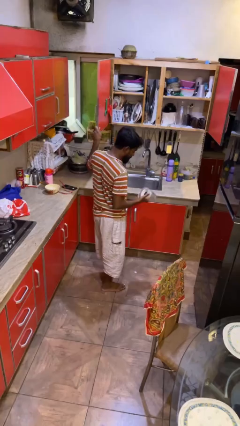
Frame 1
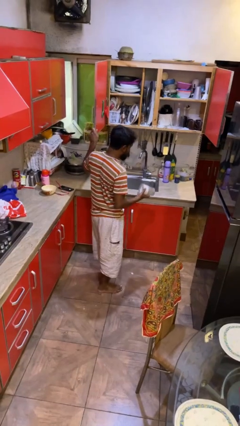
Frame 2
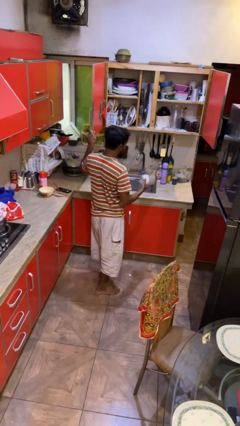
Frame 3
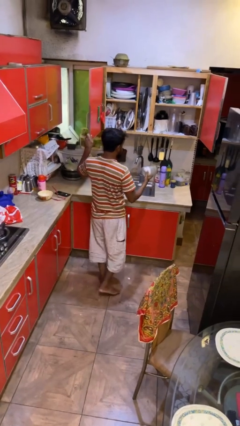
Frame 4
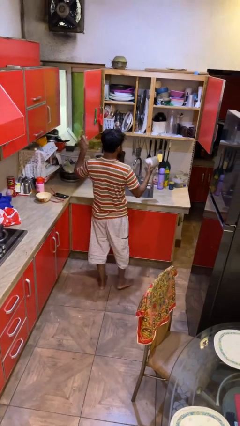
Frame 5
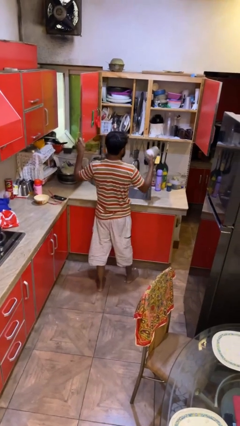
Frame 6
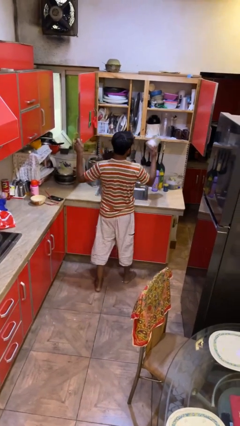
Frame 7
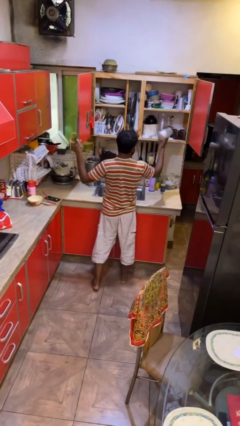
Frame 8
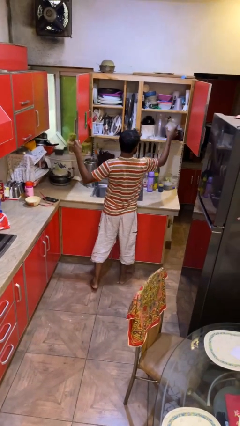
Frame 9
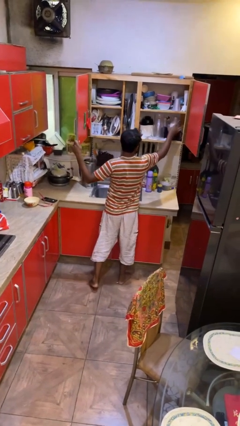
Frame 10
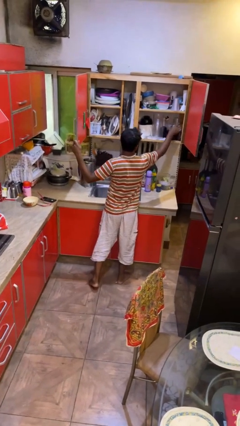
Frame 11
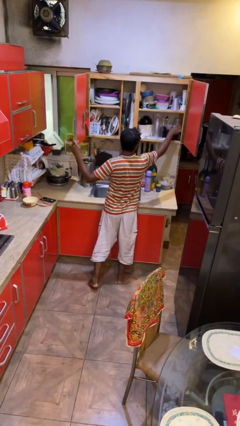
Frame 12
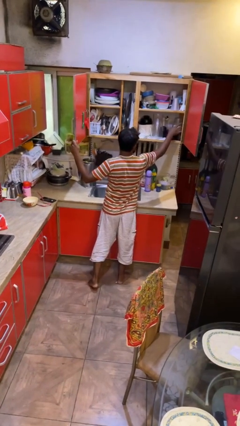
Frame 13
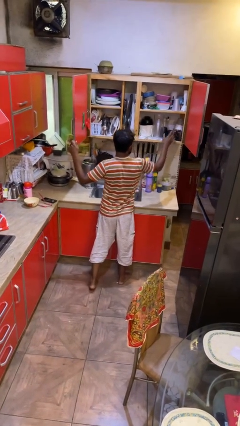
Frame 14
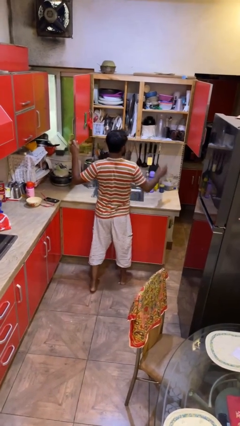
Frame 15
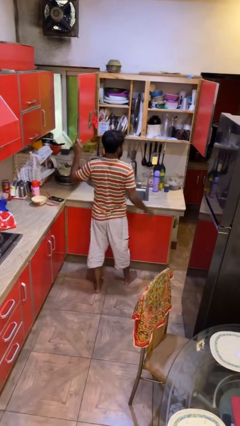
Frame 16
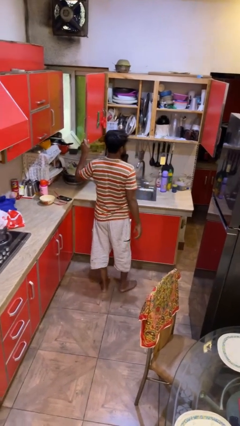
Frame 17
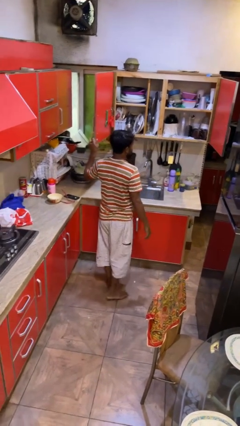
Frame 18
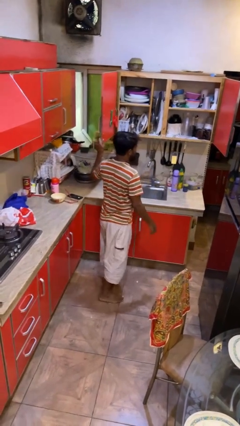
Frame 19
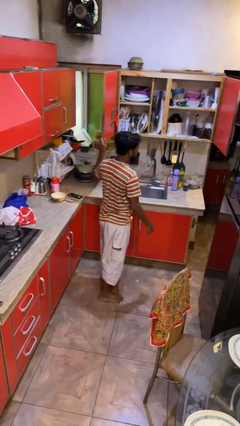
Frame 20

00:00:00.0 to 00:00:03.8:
person puts down object into cabinet

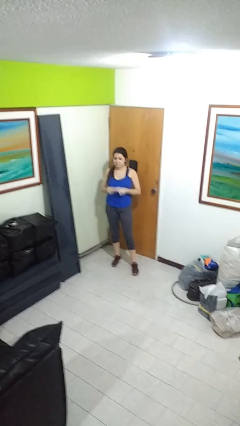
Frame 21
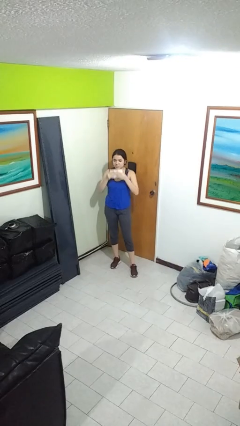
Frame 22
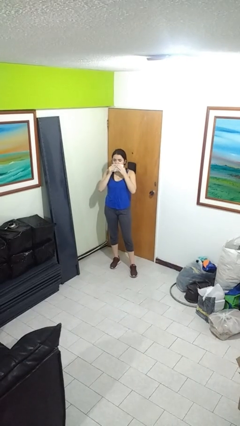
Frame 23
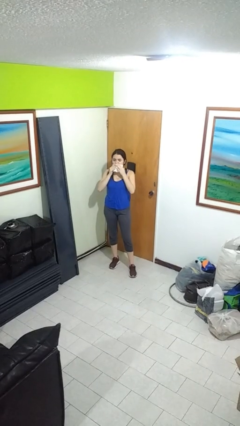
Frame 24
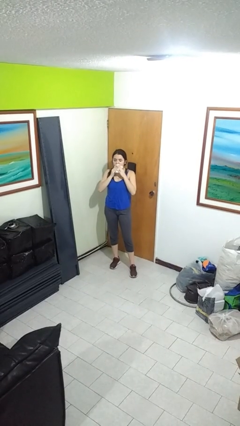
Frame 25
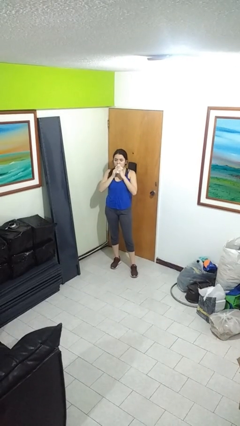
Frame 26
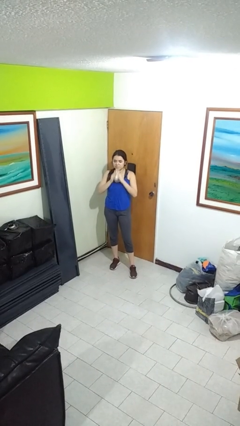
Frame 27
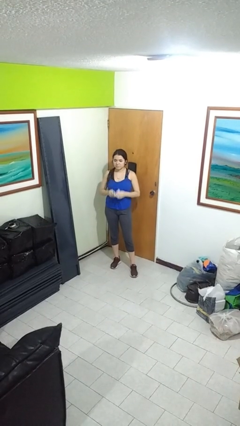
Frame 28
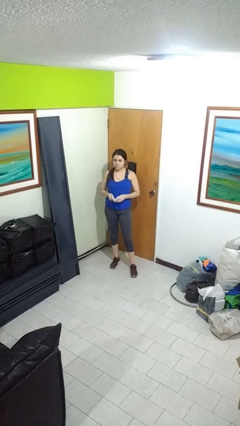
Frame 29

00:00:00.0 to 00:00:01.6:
person wipes mouth with napkin

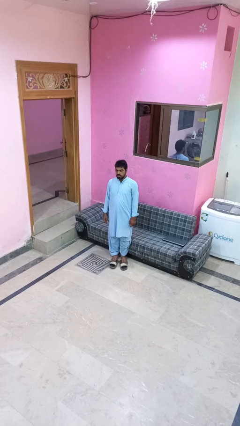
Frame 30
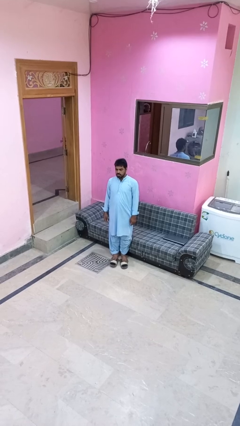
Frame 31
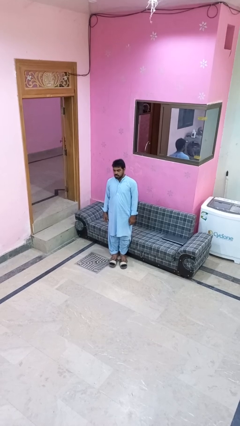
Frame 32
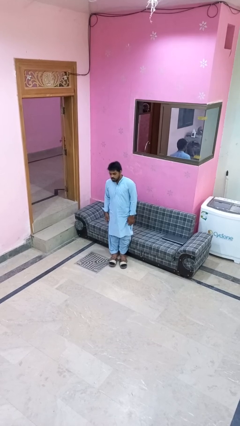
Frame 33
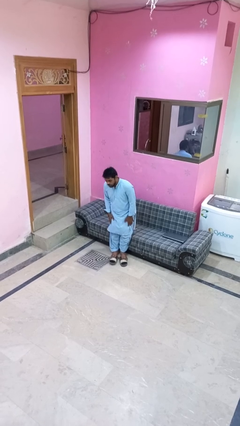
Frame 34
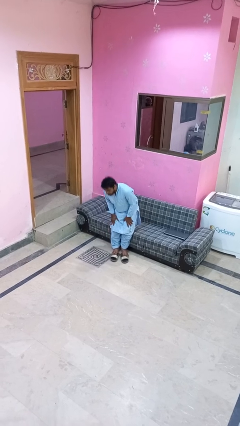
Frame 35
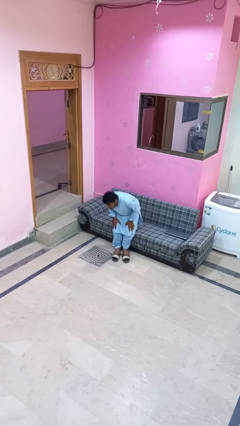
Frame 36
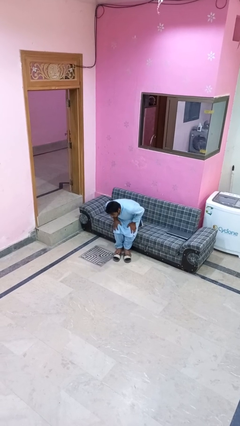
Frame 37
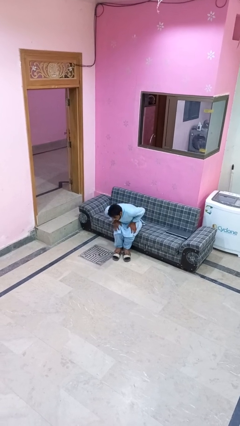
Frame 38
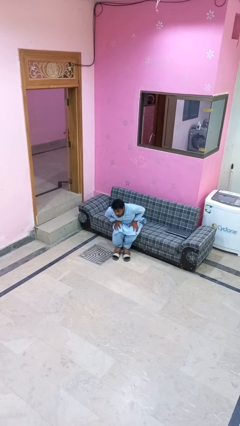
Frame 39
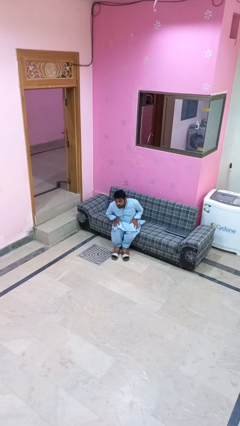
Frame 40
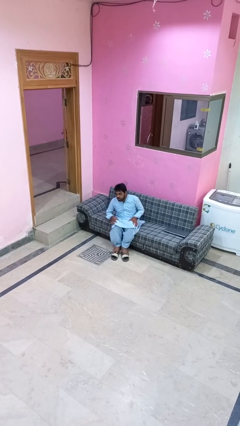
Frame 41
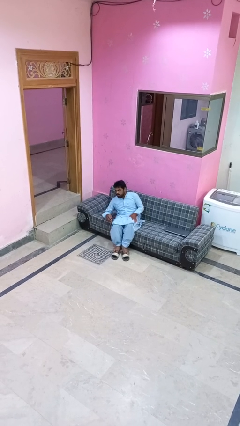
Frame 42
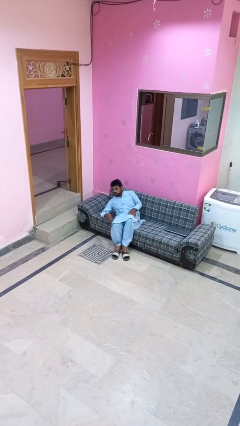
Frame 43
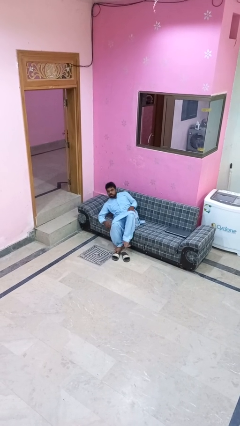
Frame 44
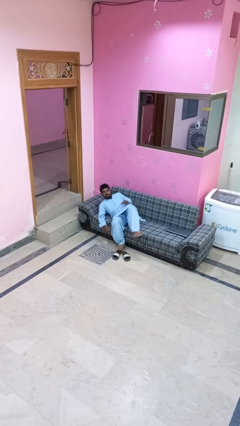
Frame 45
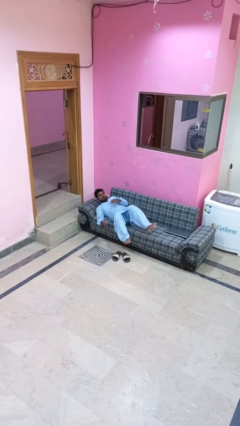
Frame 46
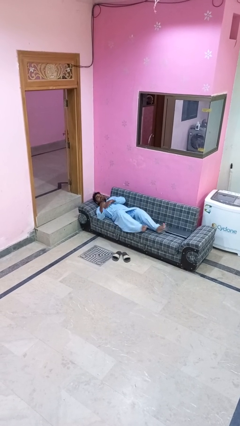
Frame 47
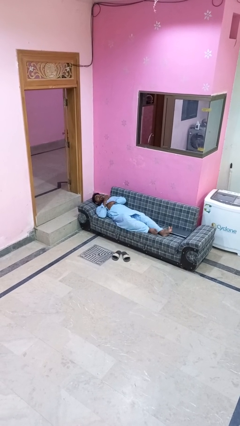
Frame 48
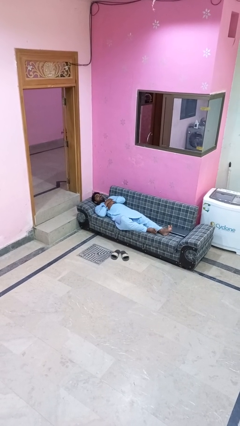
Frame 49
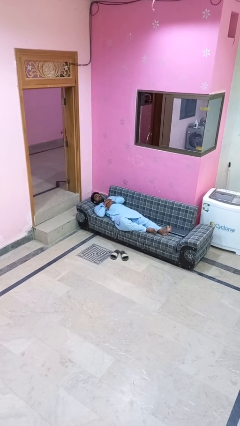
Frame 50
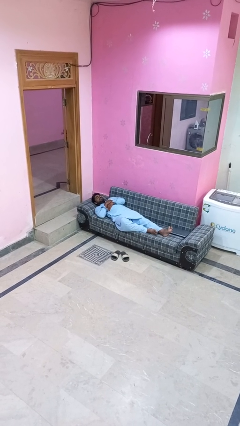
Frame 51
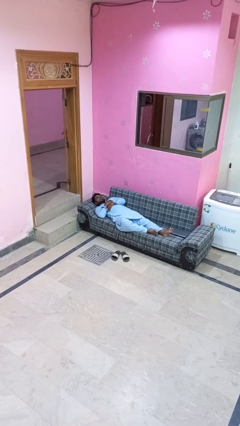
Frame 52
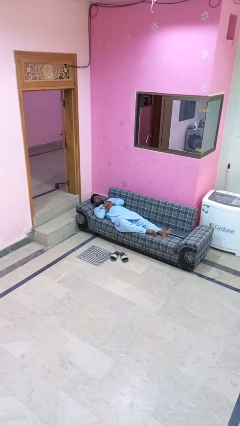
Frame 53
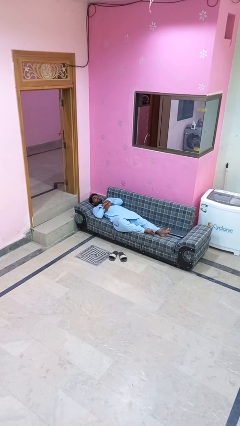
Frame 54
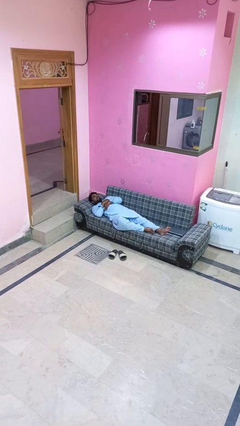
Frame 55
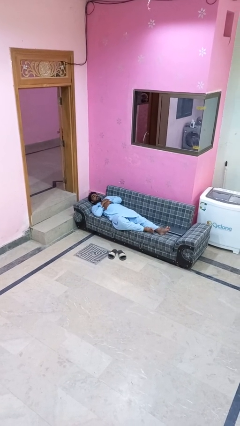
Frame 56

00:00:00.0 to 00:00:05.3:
person lies down on couch

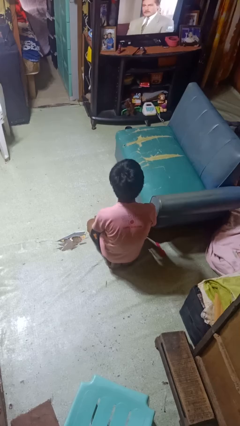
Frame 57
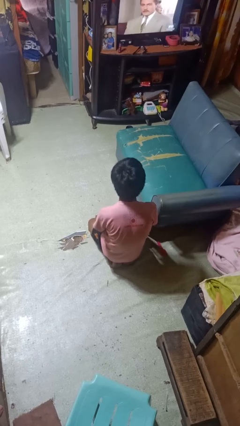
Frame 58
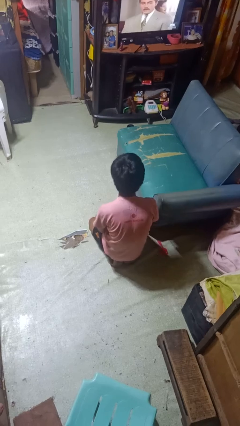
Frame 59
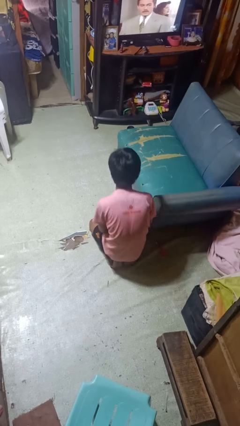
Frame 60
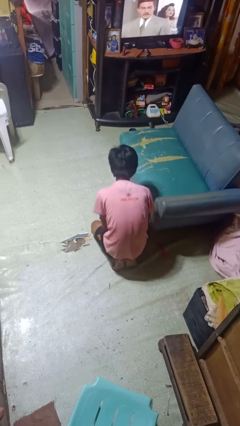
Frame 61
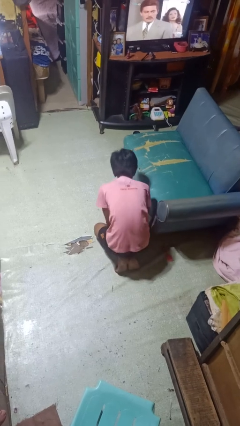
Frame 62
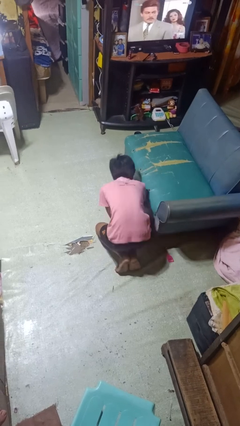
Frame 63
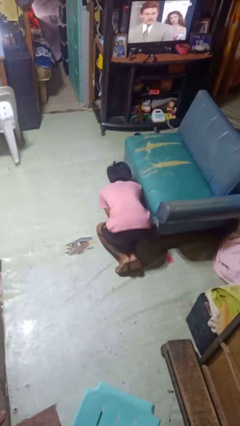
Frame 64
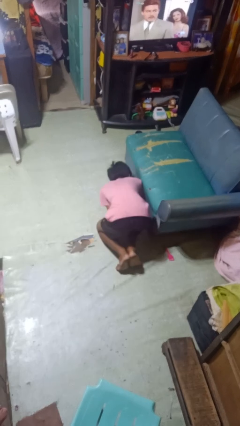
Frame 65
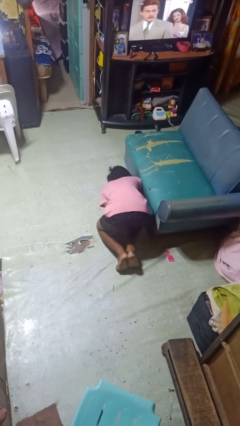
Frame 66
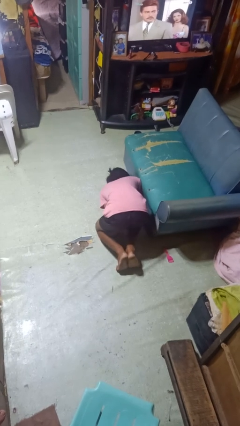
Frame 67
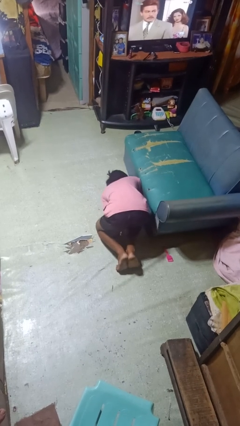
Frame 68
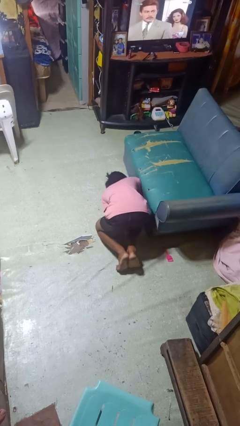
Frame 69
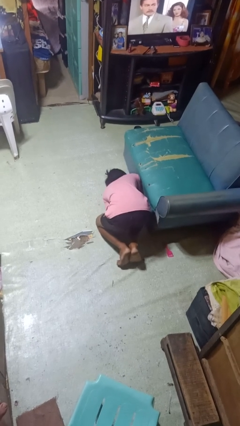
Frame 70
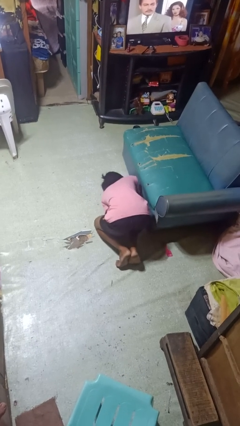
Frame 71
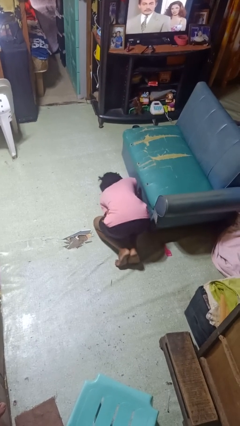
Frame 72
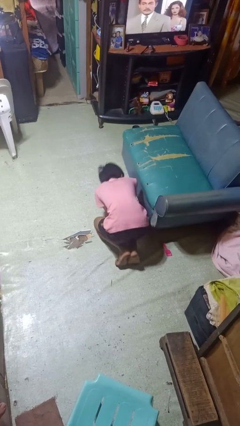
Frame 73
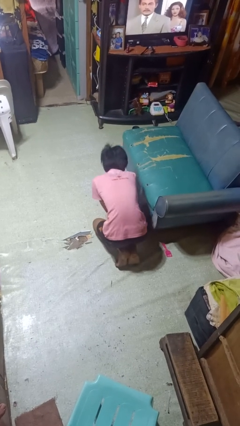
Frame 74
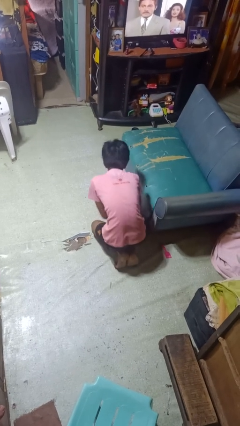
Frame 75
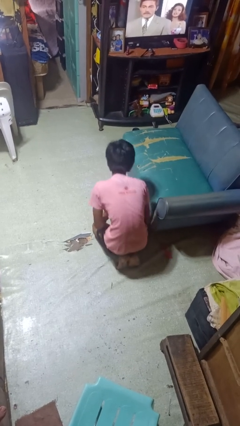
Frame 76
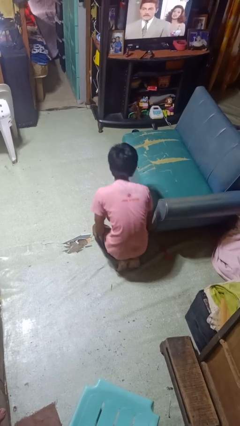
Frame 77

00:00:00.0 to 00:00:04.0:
person searches under couch

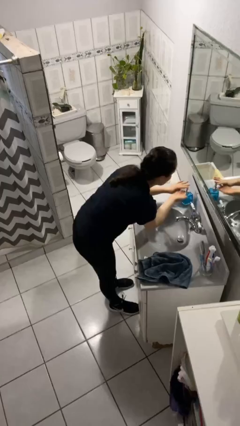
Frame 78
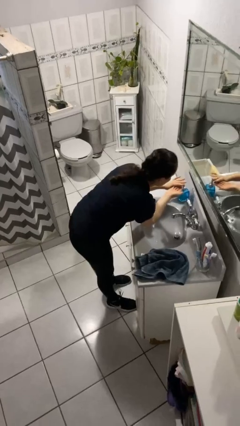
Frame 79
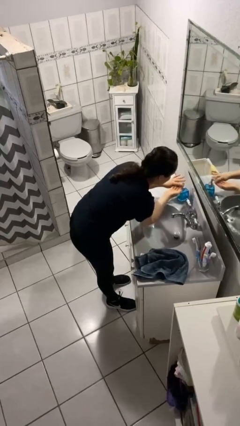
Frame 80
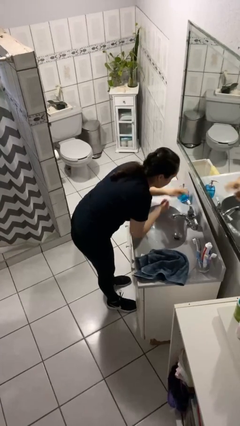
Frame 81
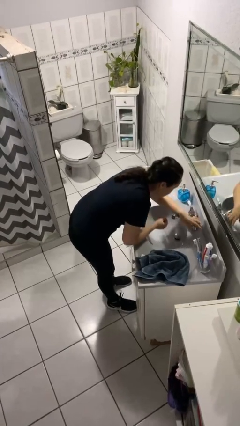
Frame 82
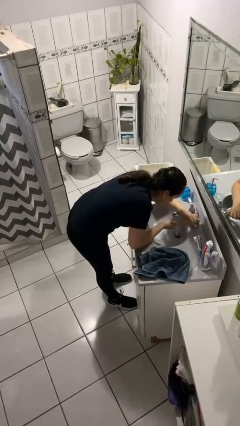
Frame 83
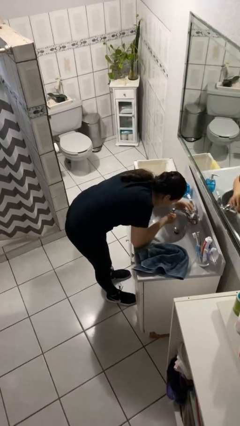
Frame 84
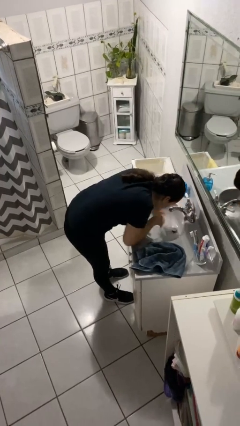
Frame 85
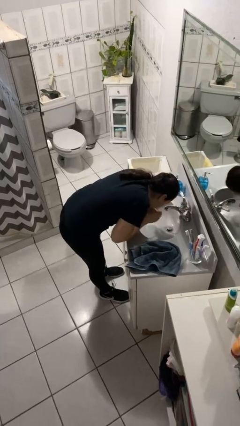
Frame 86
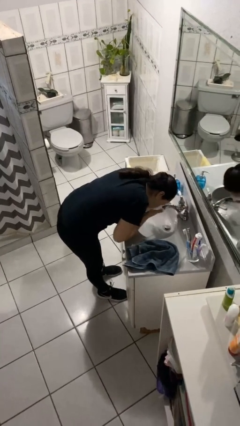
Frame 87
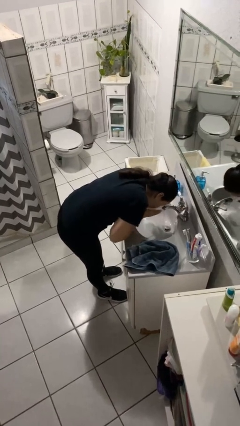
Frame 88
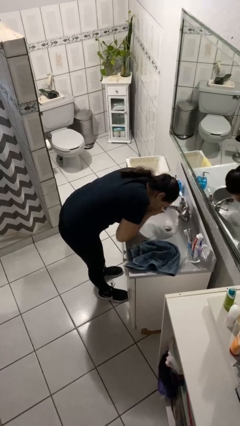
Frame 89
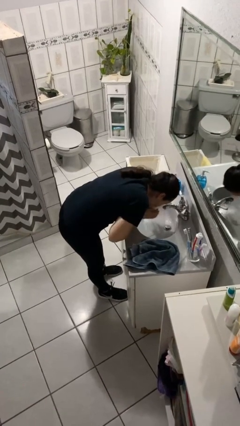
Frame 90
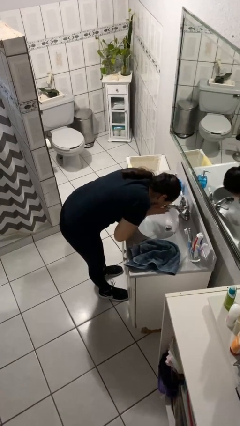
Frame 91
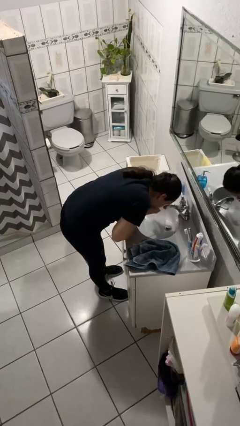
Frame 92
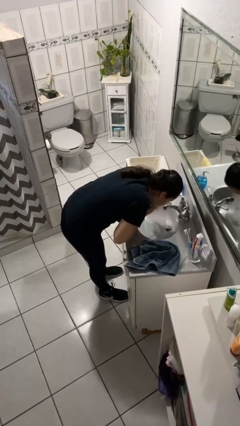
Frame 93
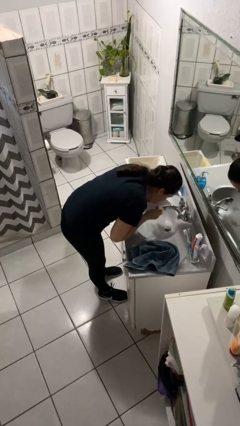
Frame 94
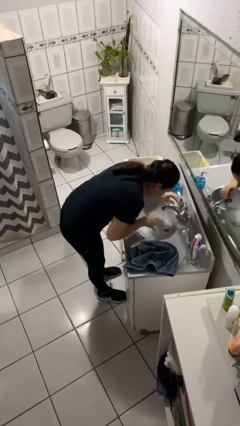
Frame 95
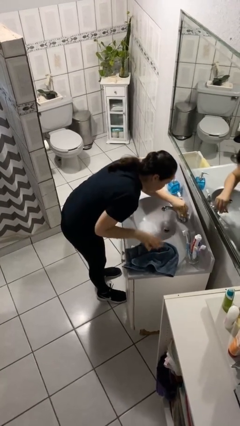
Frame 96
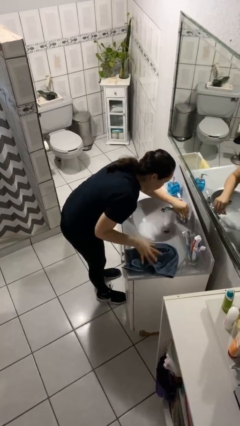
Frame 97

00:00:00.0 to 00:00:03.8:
person washes face
